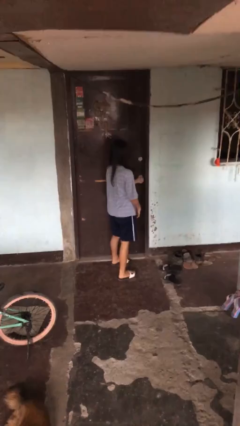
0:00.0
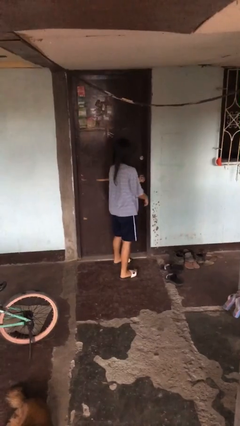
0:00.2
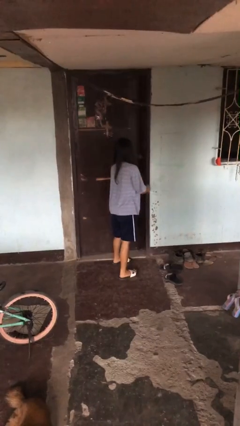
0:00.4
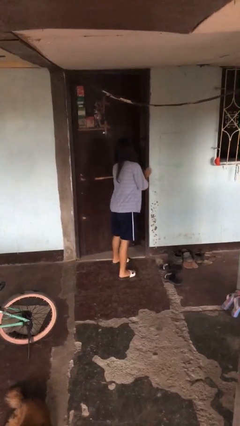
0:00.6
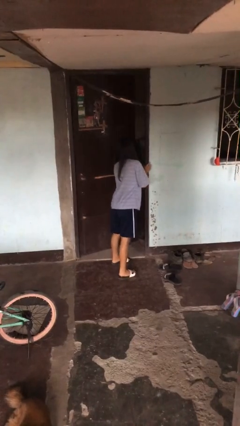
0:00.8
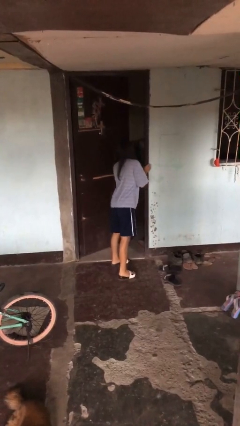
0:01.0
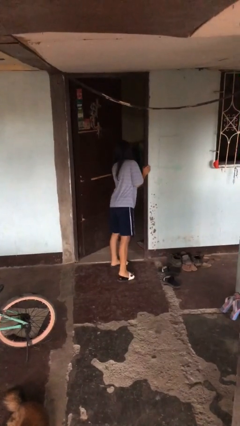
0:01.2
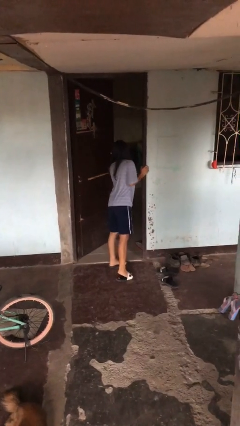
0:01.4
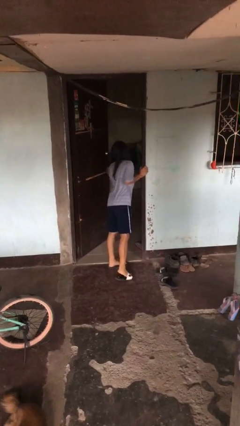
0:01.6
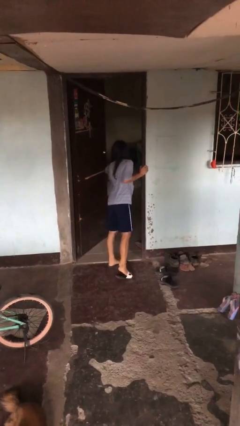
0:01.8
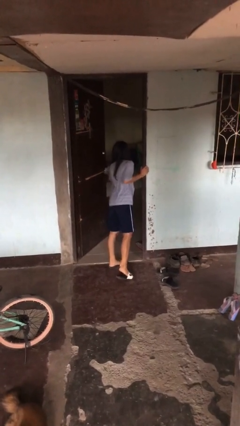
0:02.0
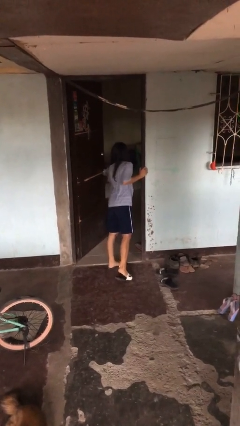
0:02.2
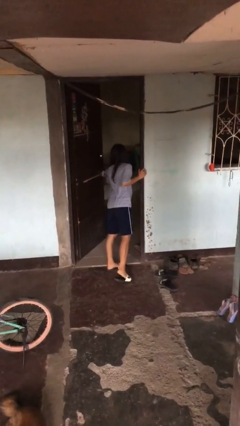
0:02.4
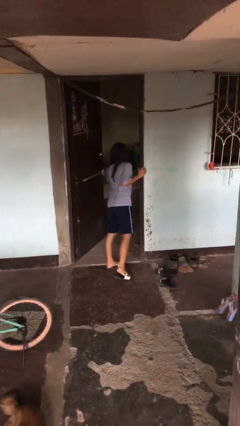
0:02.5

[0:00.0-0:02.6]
person opens facility door

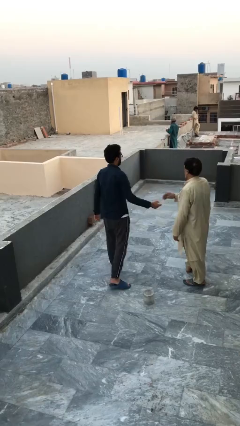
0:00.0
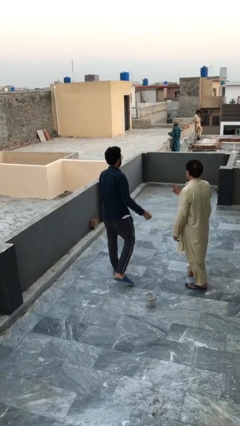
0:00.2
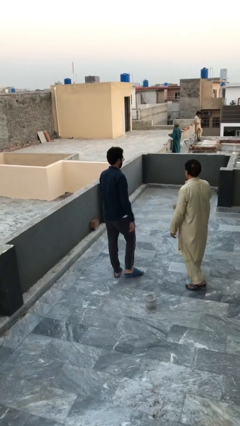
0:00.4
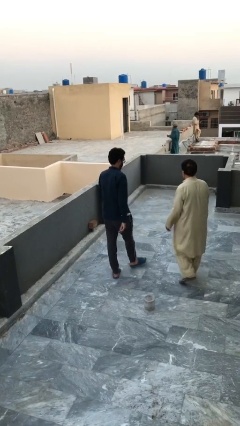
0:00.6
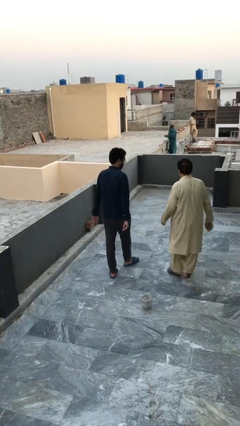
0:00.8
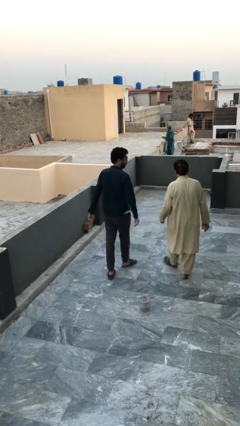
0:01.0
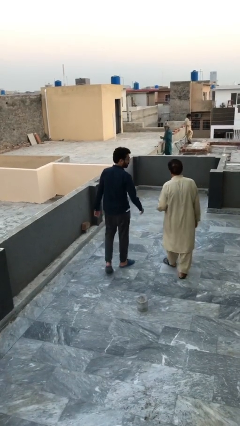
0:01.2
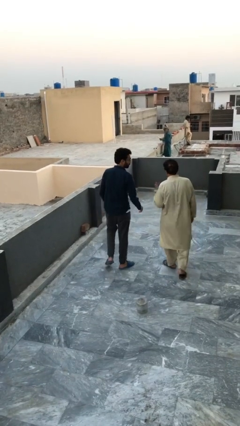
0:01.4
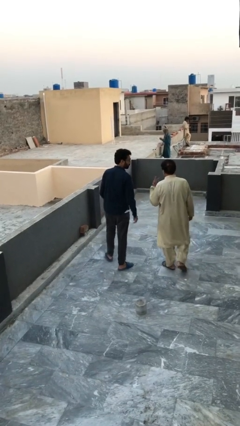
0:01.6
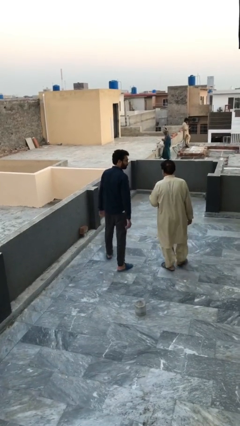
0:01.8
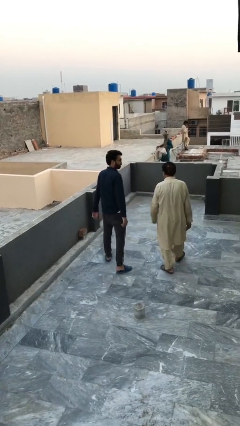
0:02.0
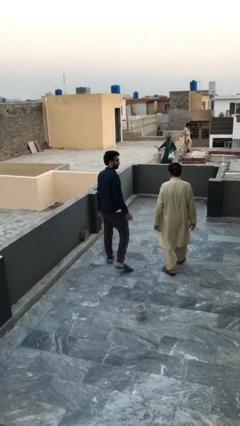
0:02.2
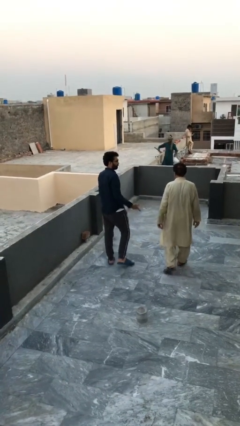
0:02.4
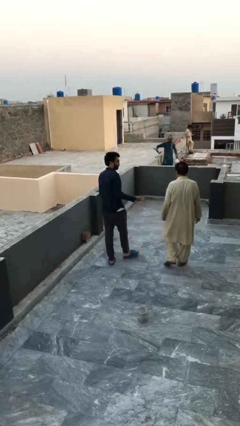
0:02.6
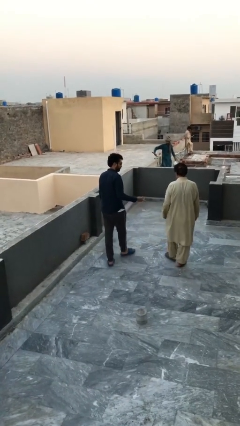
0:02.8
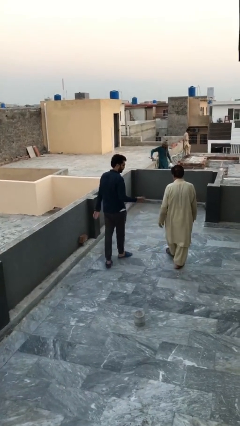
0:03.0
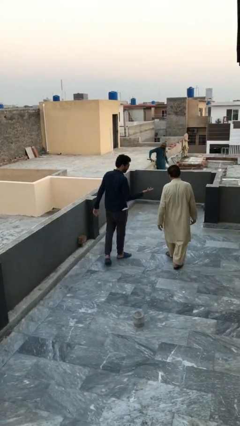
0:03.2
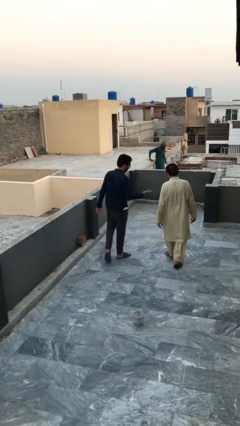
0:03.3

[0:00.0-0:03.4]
person talks to person

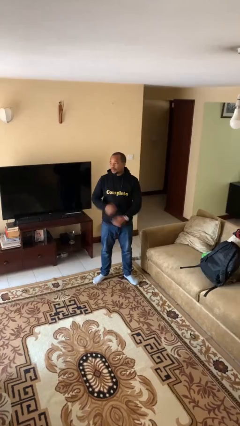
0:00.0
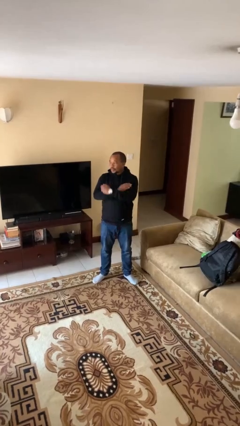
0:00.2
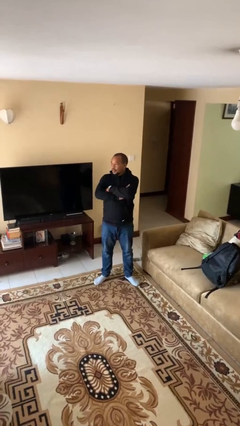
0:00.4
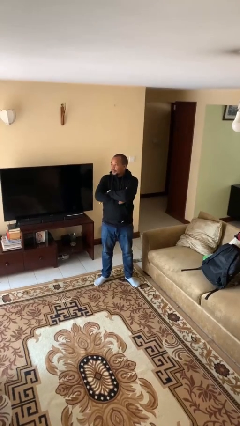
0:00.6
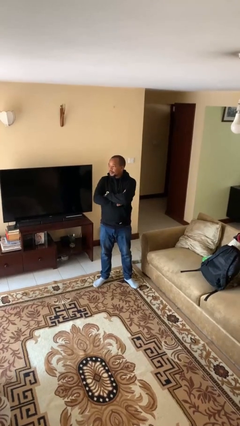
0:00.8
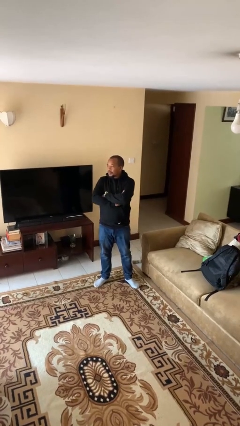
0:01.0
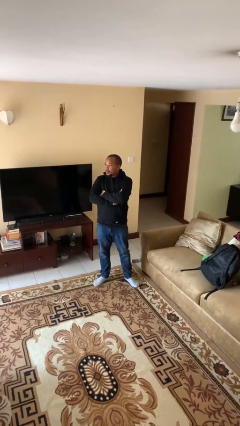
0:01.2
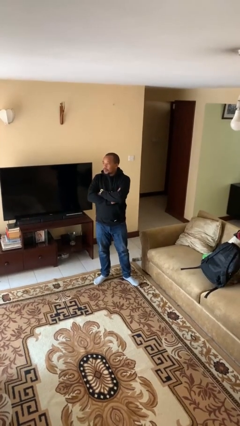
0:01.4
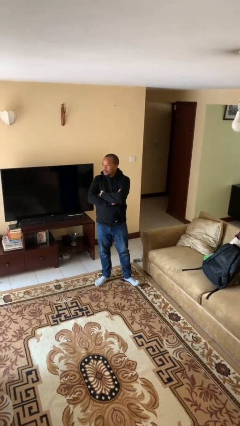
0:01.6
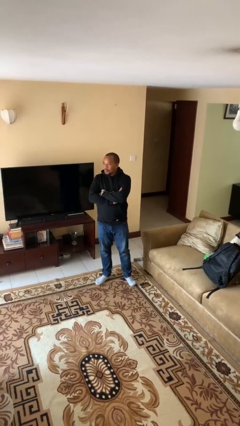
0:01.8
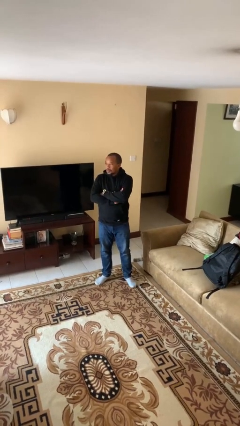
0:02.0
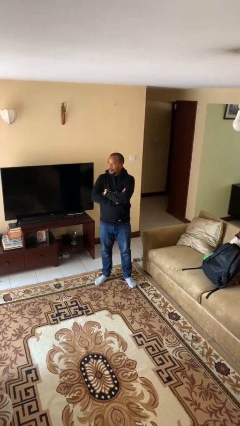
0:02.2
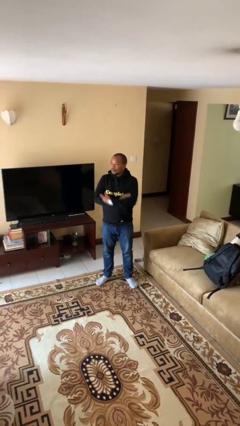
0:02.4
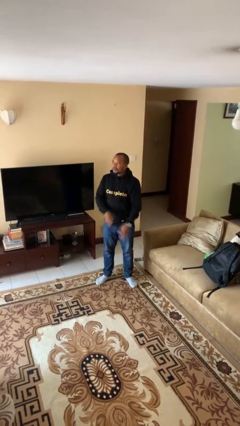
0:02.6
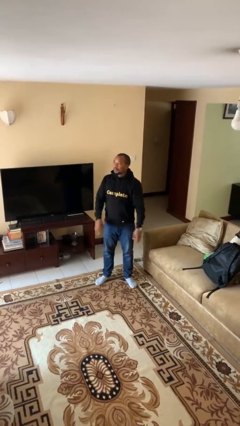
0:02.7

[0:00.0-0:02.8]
person crosses arms

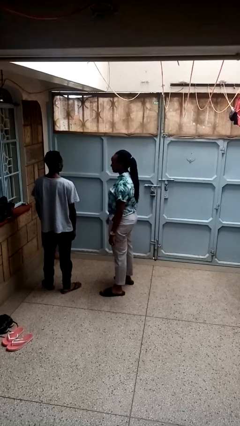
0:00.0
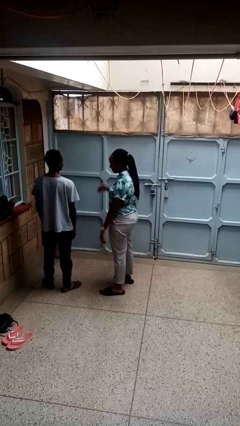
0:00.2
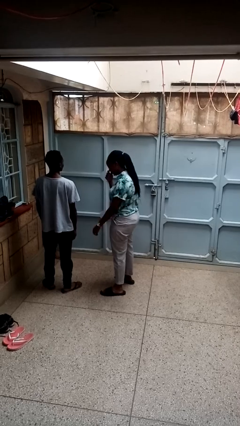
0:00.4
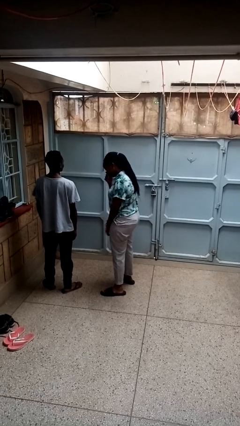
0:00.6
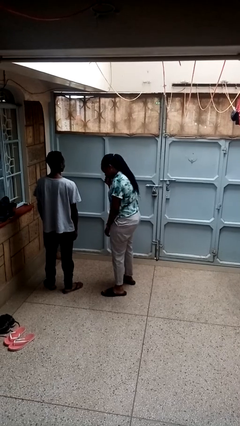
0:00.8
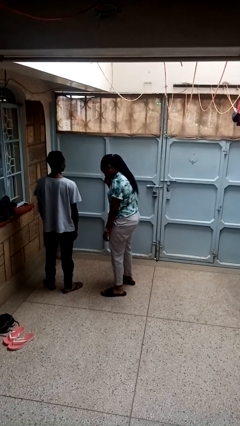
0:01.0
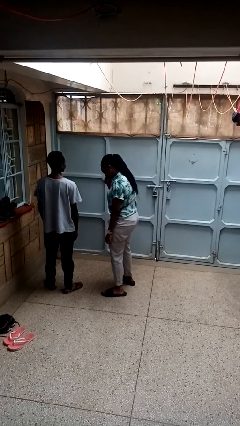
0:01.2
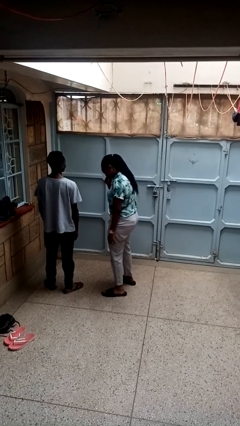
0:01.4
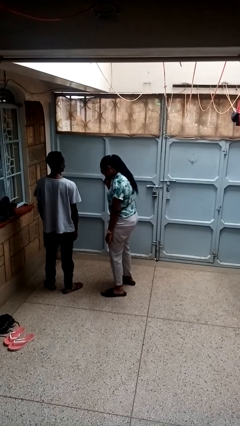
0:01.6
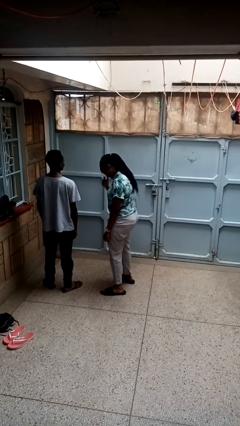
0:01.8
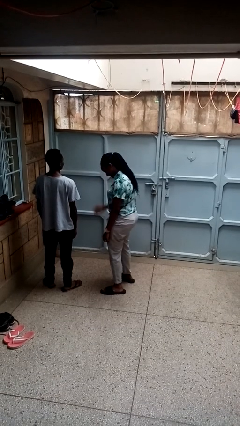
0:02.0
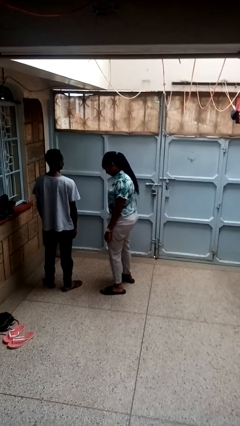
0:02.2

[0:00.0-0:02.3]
person laughs with person

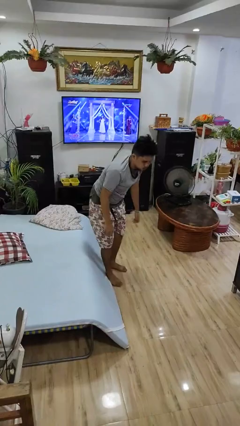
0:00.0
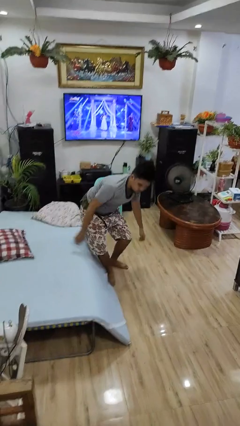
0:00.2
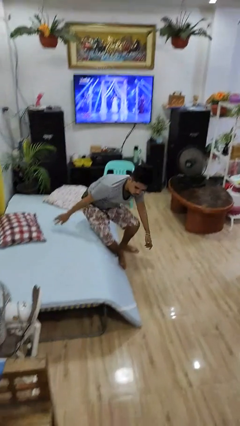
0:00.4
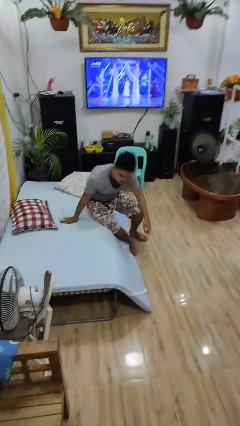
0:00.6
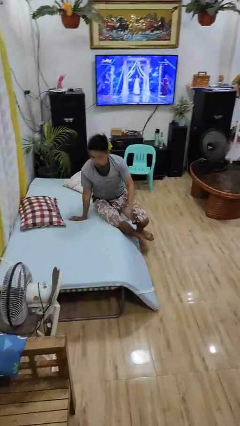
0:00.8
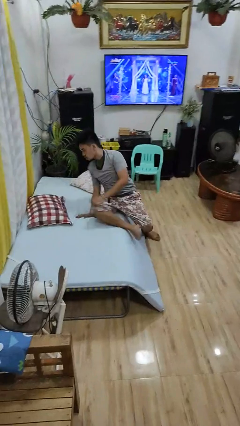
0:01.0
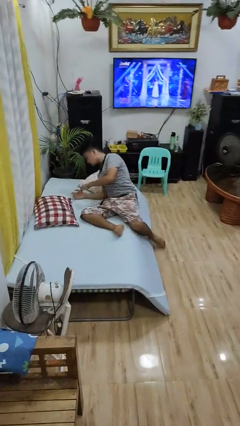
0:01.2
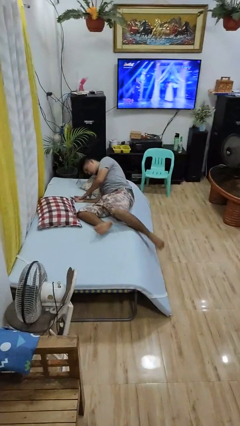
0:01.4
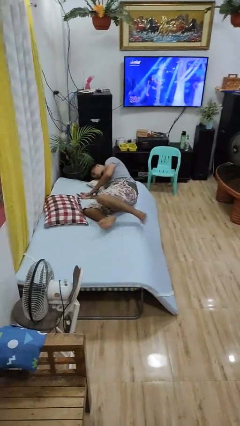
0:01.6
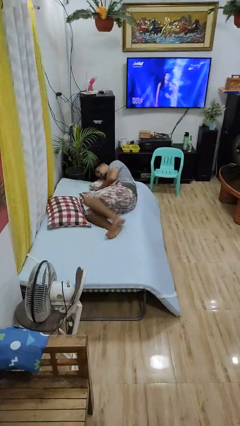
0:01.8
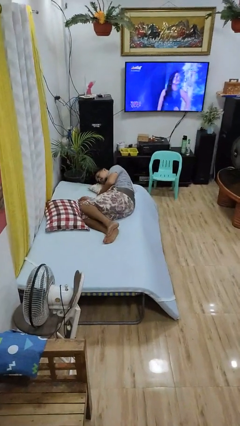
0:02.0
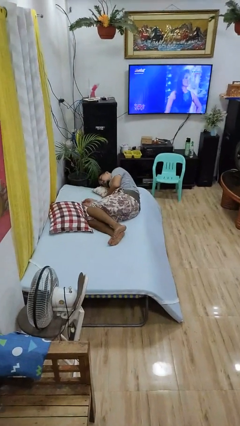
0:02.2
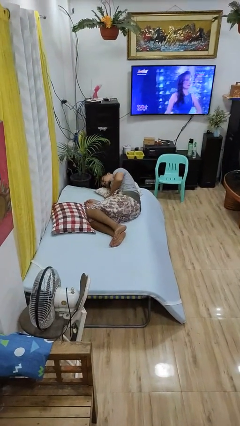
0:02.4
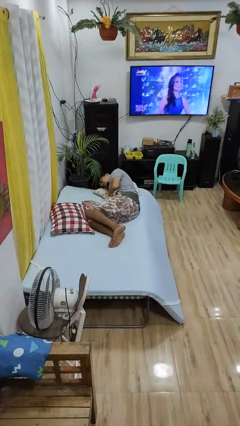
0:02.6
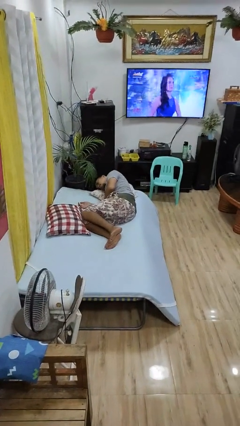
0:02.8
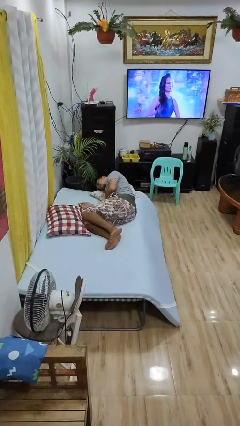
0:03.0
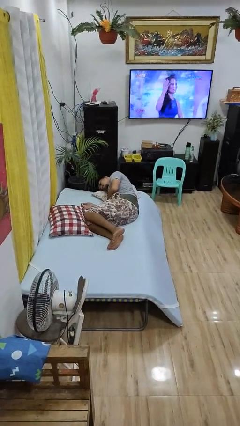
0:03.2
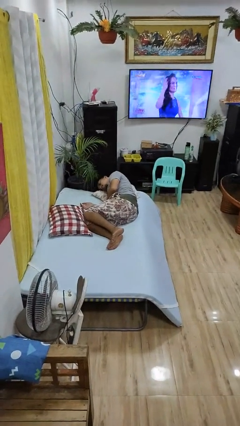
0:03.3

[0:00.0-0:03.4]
person lies down on bed

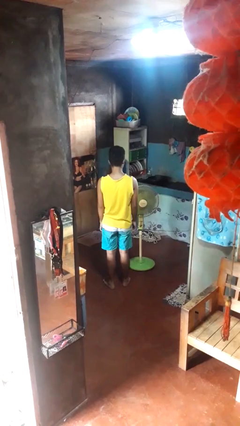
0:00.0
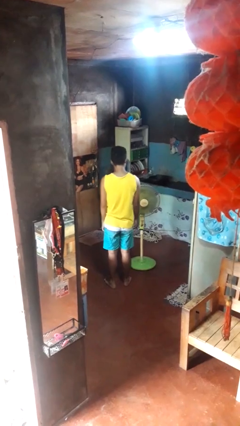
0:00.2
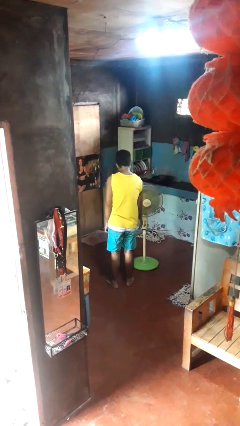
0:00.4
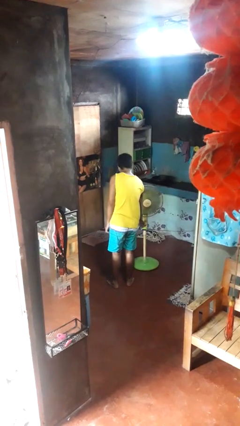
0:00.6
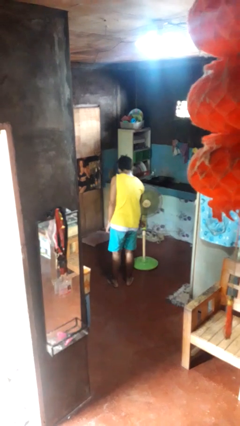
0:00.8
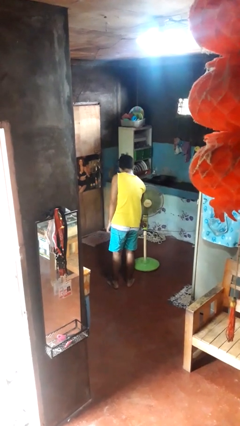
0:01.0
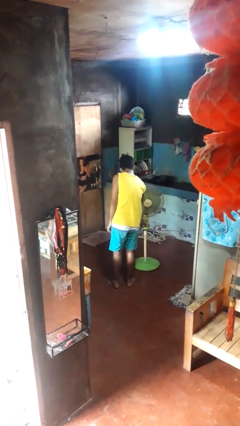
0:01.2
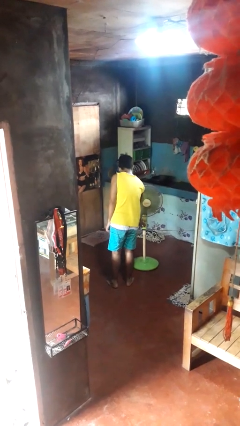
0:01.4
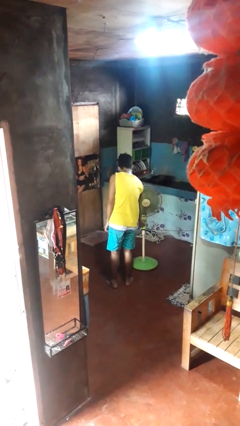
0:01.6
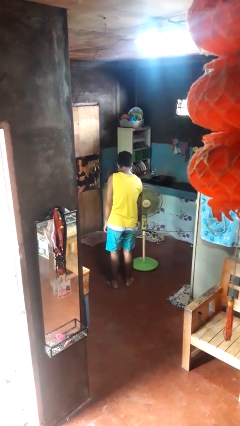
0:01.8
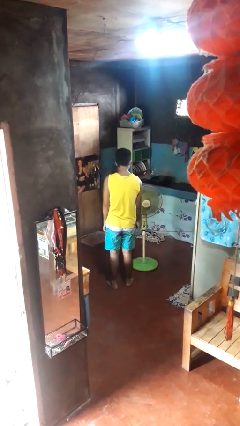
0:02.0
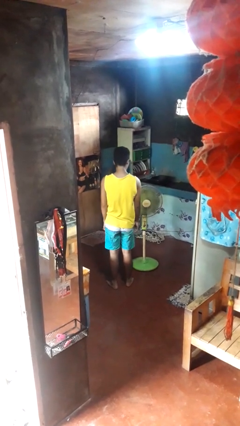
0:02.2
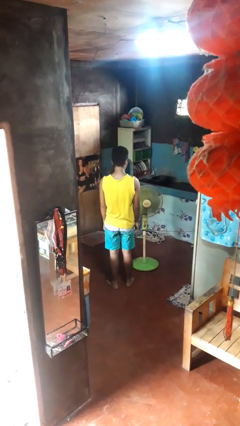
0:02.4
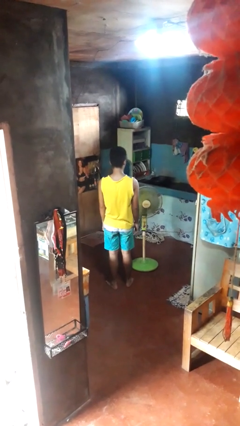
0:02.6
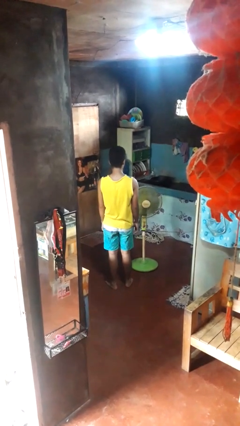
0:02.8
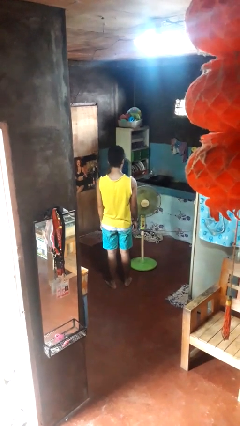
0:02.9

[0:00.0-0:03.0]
person turns off fan
